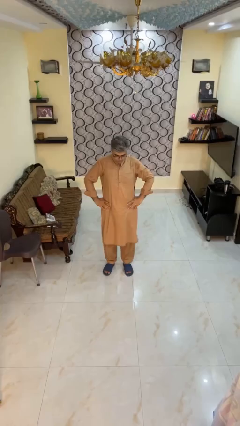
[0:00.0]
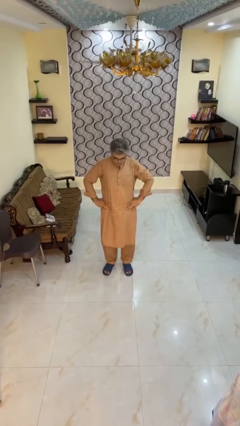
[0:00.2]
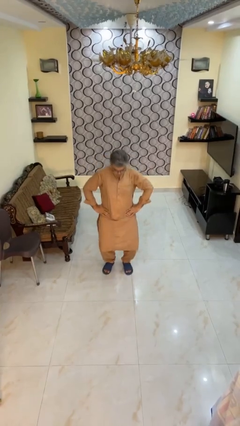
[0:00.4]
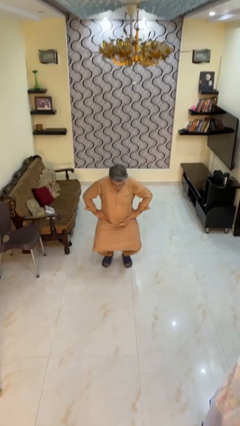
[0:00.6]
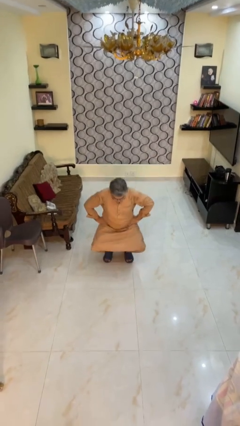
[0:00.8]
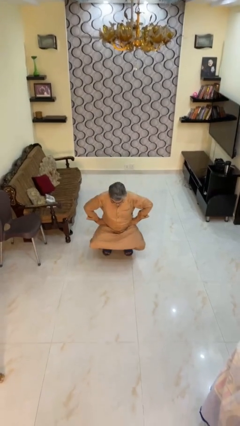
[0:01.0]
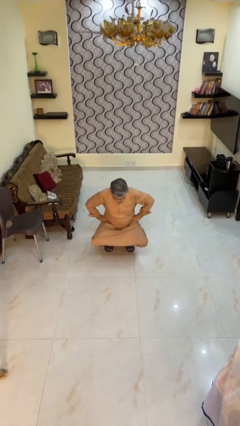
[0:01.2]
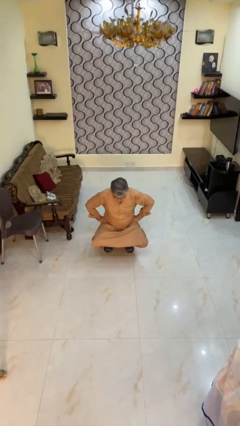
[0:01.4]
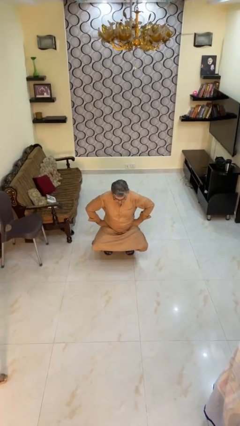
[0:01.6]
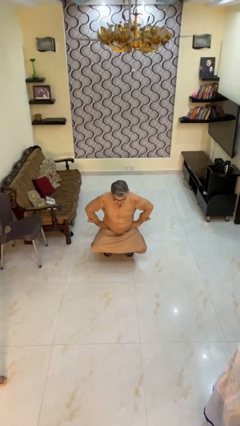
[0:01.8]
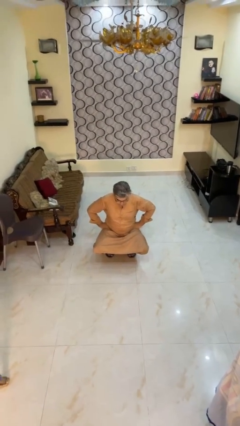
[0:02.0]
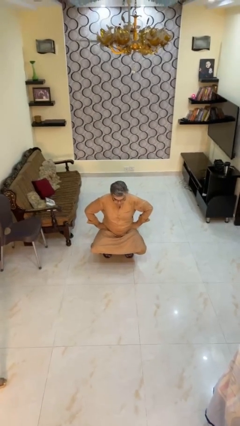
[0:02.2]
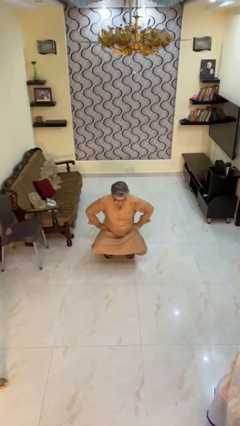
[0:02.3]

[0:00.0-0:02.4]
person squats

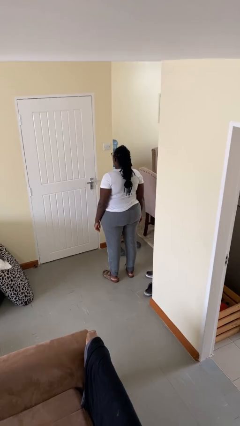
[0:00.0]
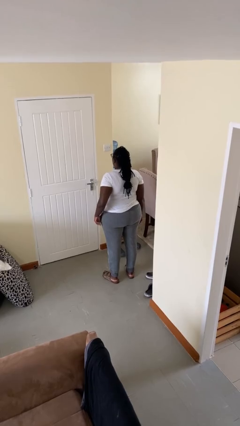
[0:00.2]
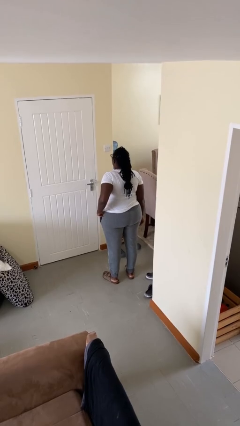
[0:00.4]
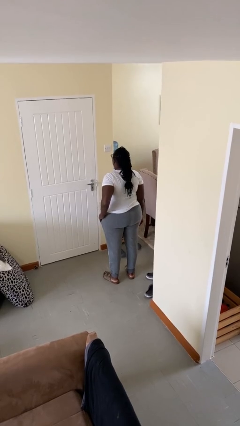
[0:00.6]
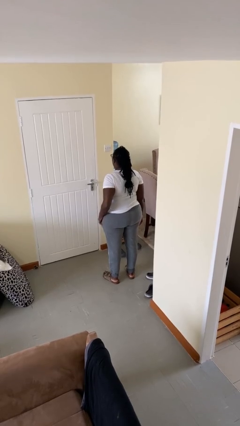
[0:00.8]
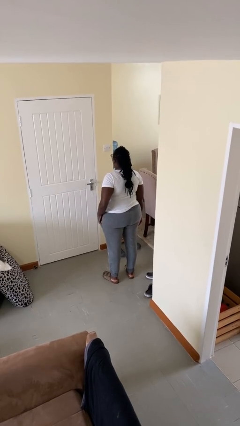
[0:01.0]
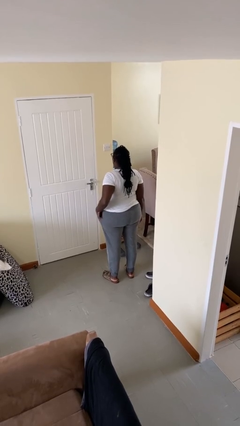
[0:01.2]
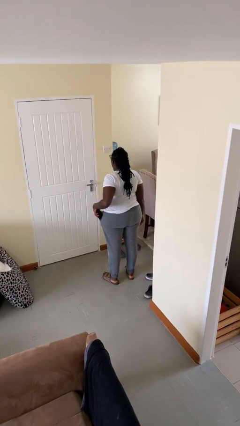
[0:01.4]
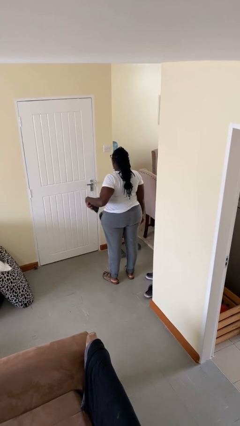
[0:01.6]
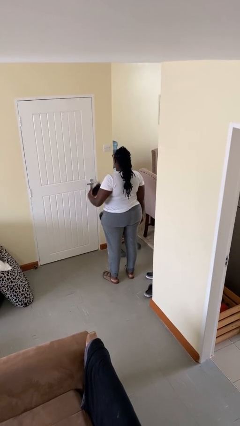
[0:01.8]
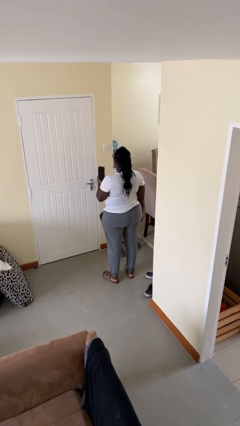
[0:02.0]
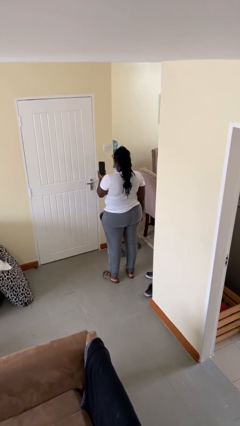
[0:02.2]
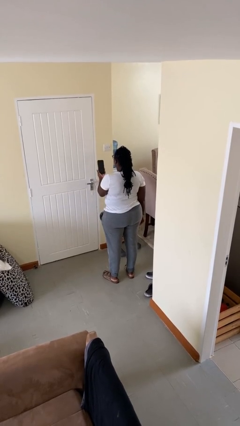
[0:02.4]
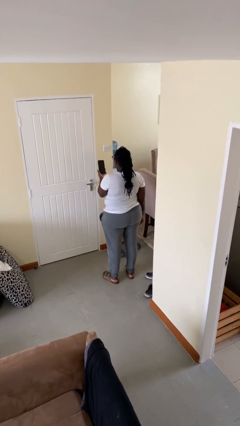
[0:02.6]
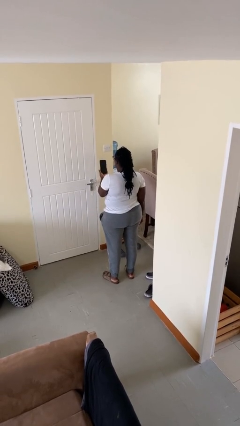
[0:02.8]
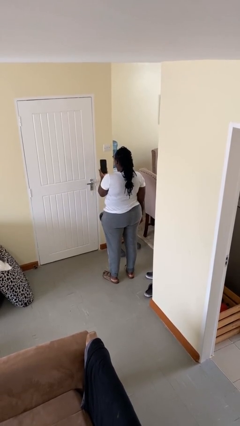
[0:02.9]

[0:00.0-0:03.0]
person takes phone from pocket

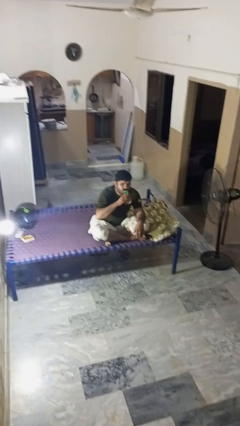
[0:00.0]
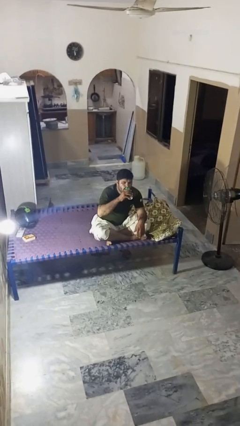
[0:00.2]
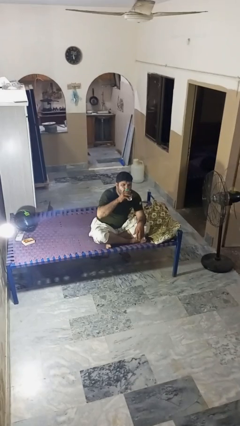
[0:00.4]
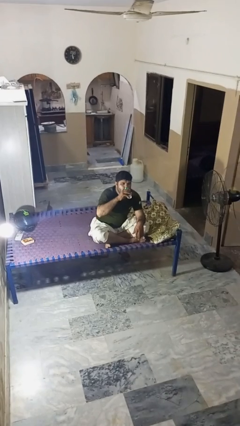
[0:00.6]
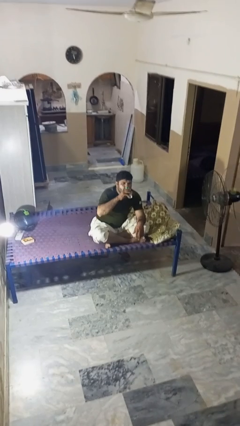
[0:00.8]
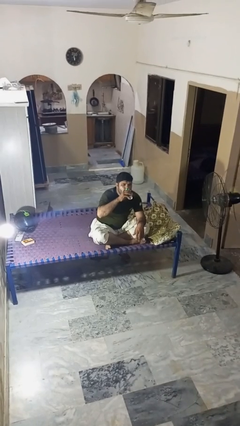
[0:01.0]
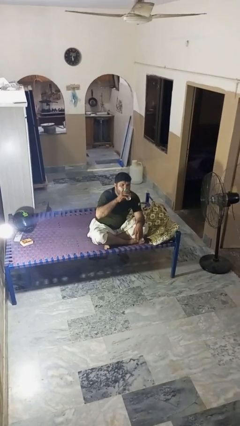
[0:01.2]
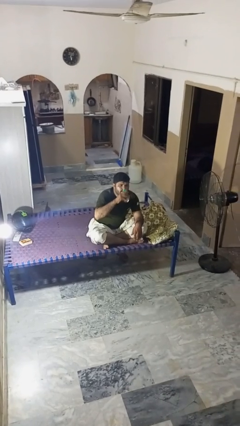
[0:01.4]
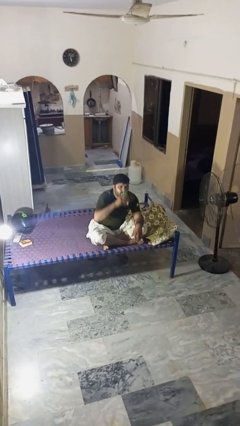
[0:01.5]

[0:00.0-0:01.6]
person drinks from beverage can

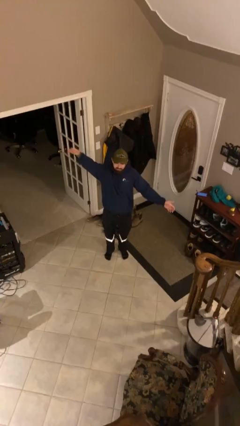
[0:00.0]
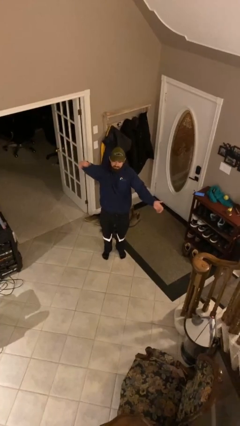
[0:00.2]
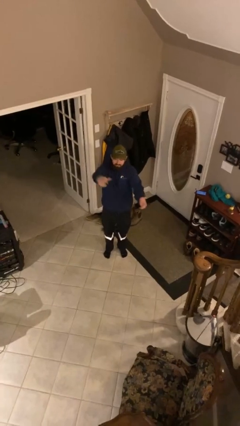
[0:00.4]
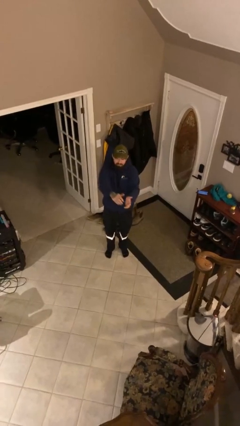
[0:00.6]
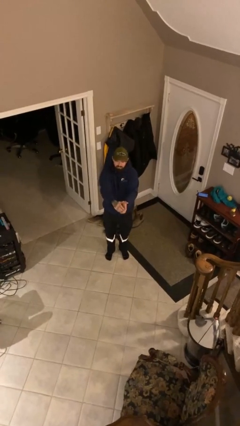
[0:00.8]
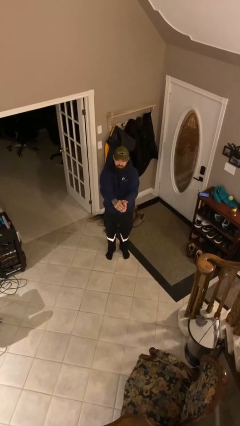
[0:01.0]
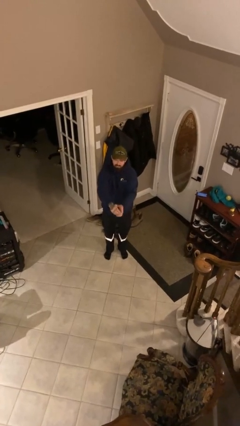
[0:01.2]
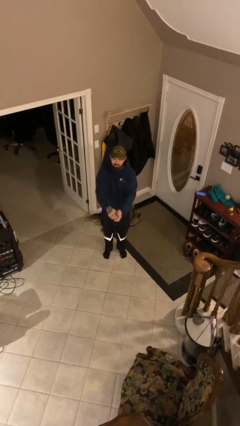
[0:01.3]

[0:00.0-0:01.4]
person gestures zoom out

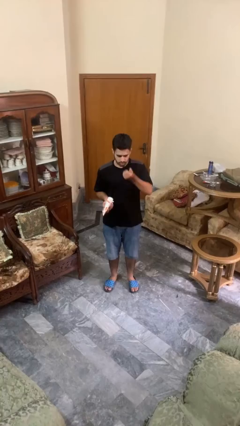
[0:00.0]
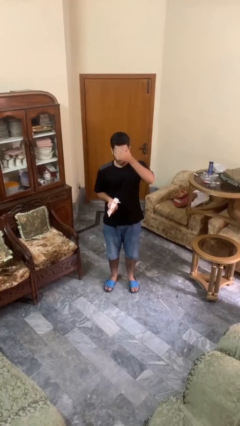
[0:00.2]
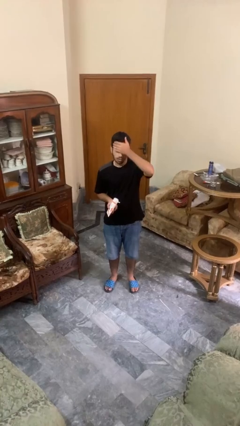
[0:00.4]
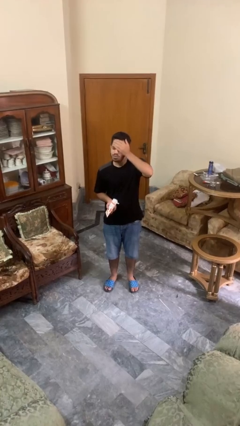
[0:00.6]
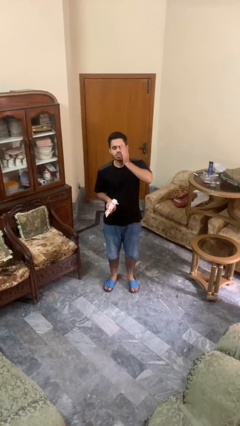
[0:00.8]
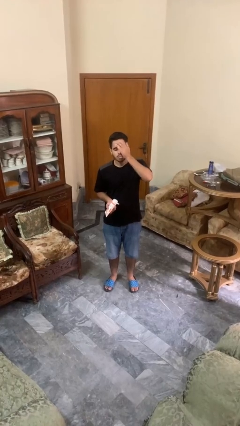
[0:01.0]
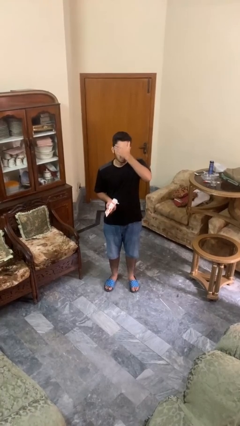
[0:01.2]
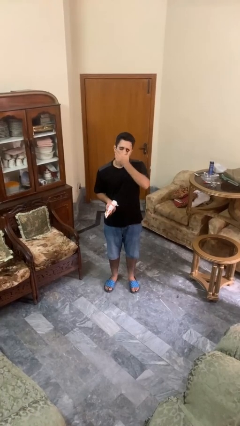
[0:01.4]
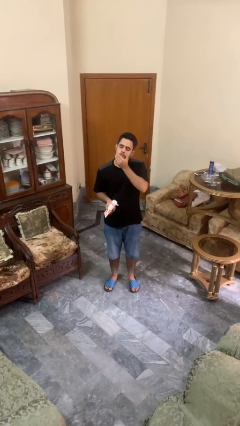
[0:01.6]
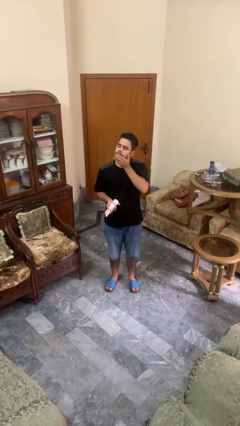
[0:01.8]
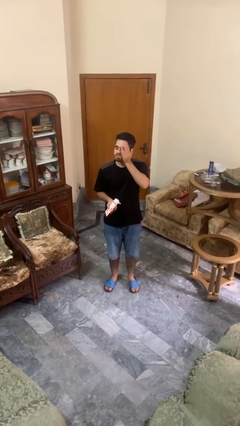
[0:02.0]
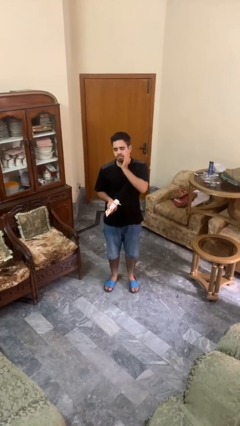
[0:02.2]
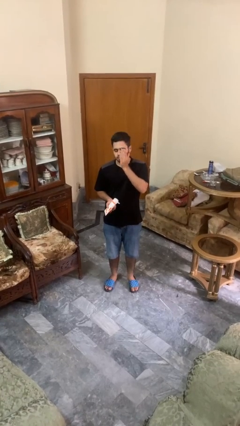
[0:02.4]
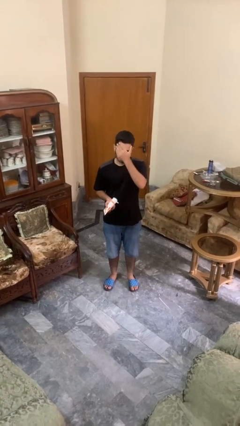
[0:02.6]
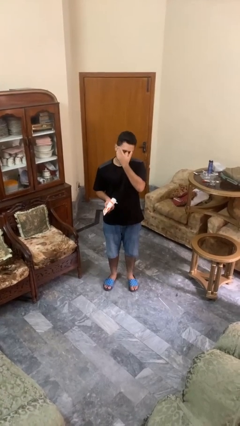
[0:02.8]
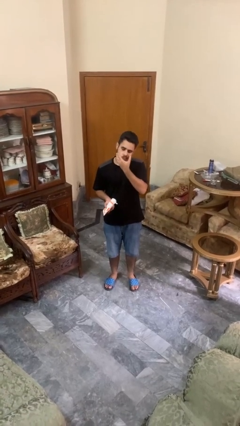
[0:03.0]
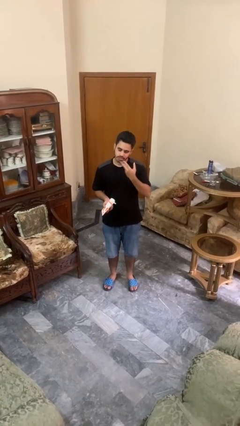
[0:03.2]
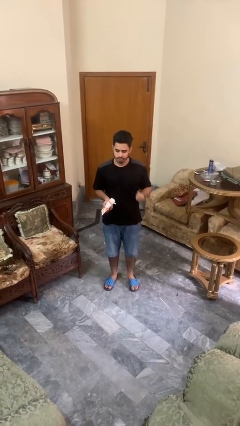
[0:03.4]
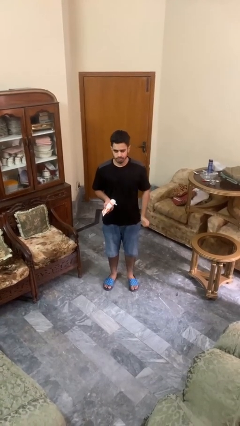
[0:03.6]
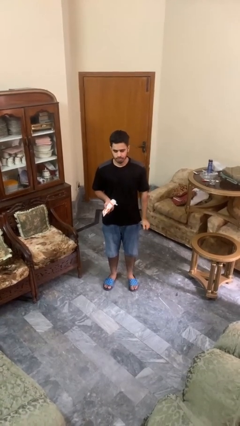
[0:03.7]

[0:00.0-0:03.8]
person applies sunscreen

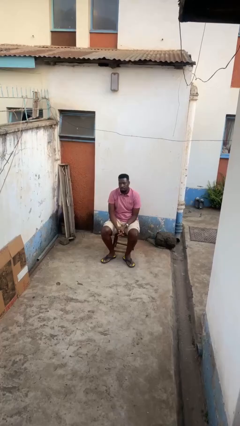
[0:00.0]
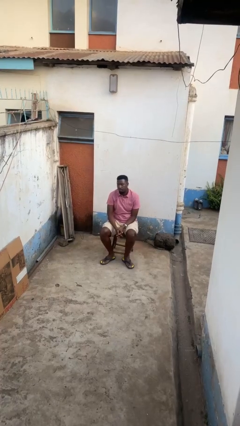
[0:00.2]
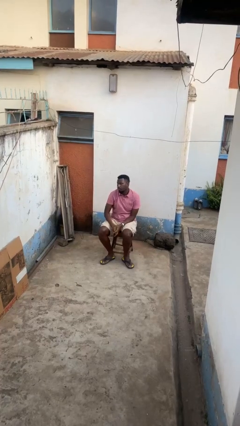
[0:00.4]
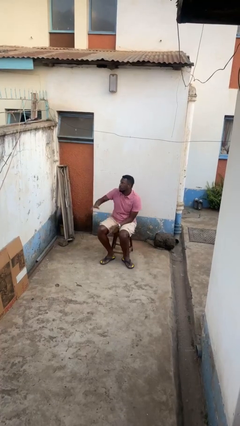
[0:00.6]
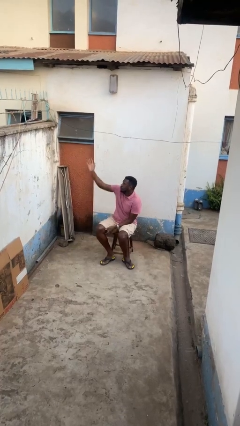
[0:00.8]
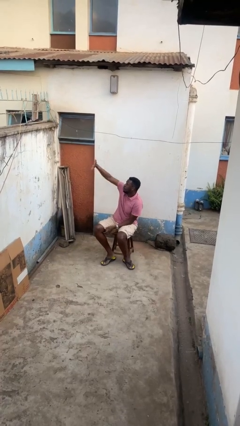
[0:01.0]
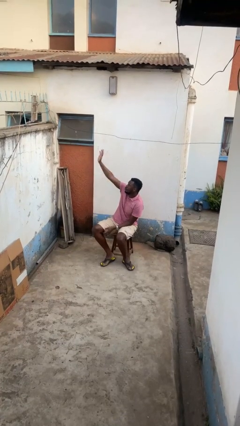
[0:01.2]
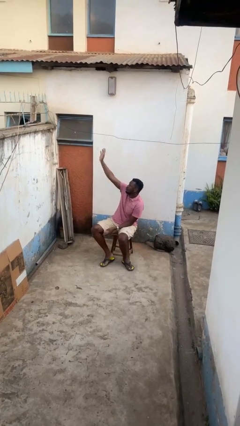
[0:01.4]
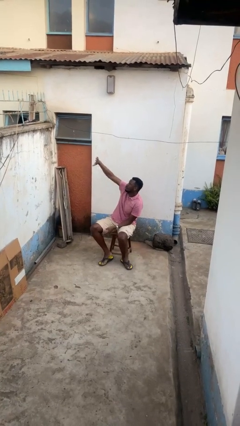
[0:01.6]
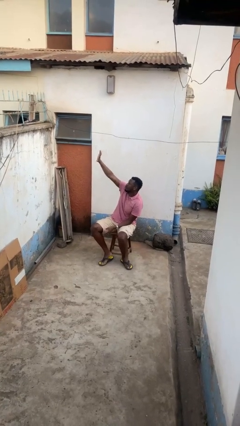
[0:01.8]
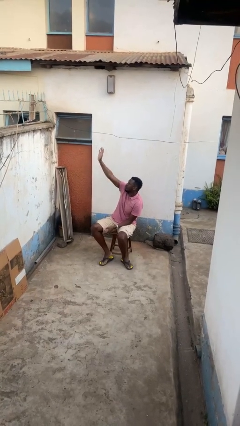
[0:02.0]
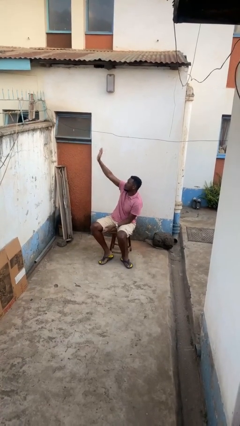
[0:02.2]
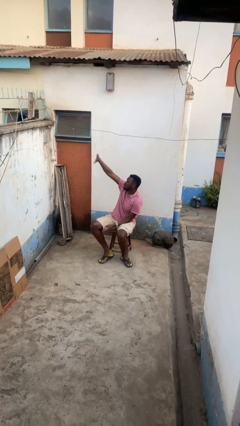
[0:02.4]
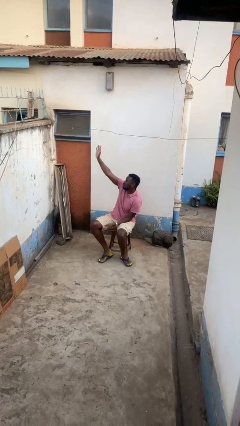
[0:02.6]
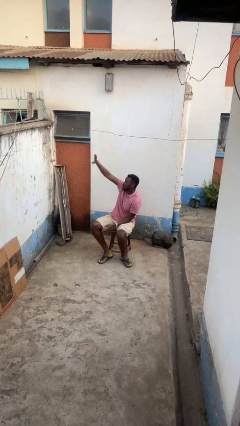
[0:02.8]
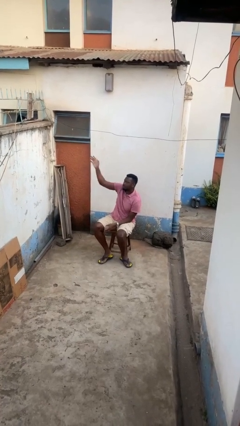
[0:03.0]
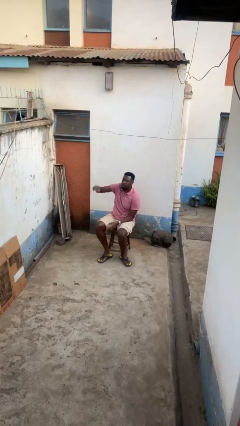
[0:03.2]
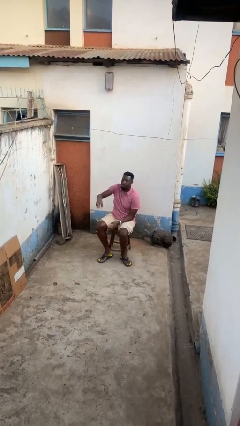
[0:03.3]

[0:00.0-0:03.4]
person waves at person

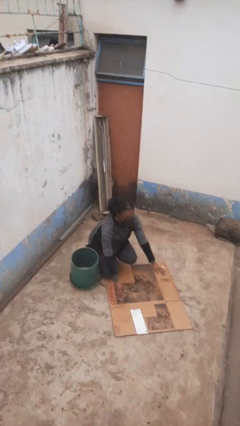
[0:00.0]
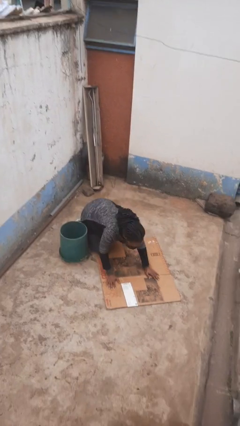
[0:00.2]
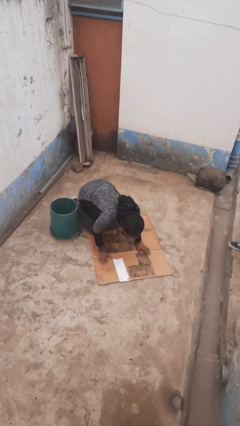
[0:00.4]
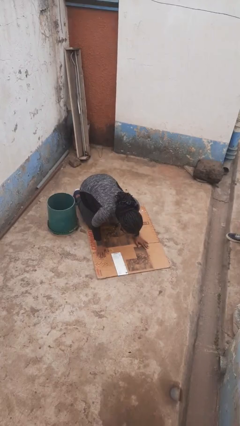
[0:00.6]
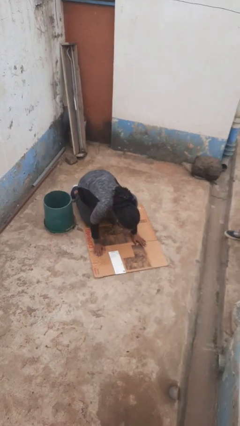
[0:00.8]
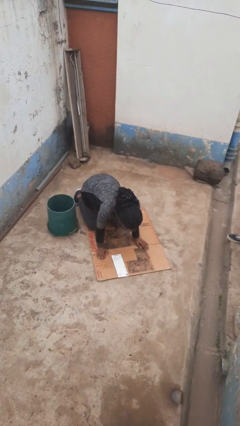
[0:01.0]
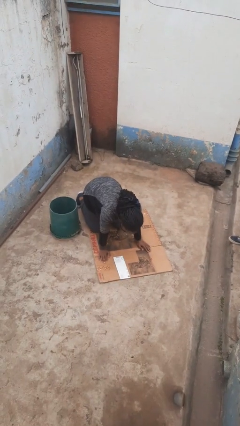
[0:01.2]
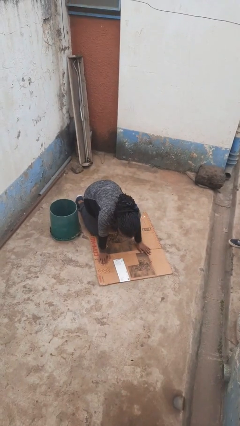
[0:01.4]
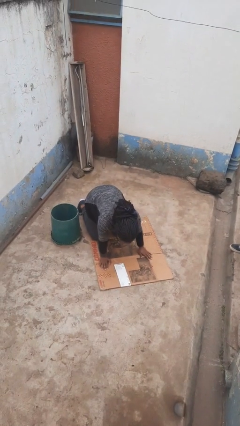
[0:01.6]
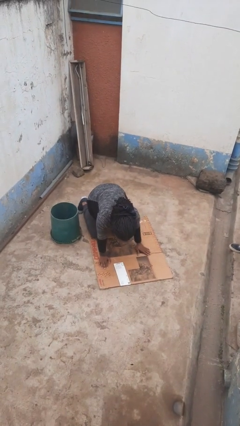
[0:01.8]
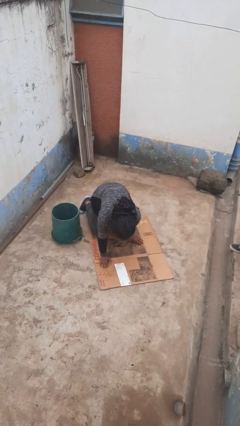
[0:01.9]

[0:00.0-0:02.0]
person trips on object on floor
